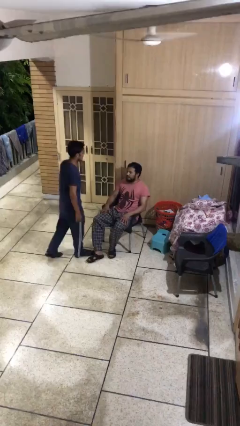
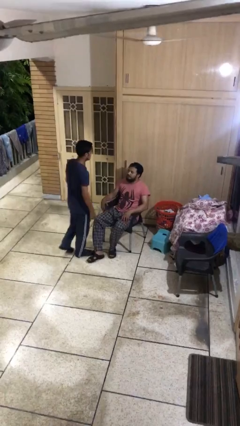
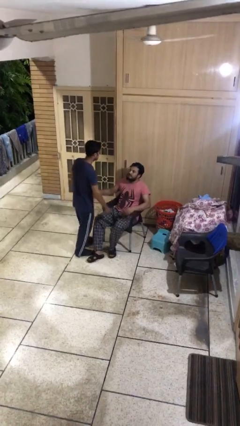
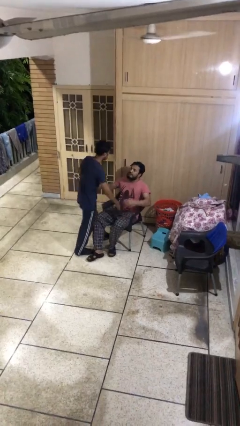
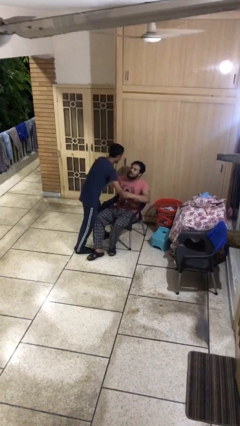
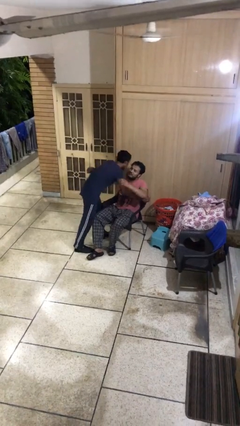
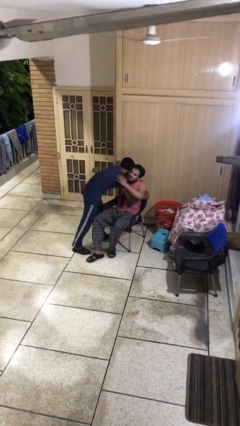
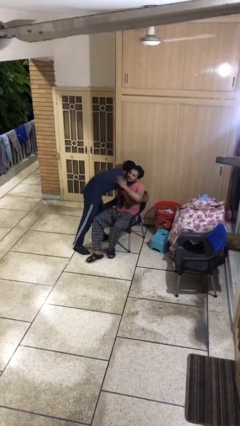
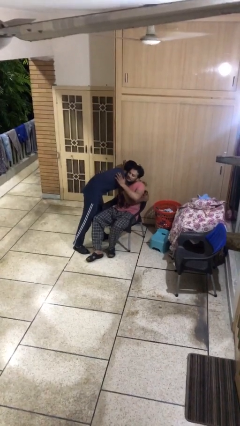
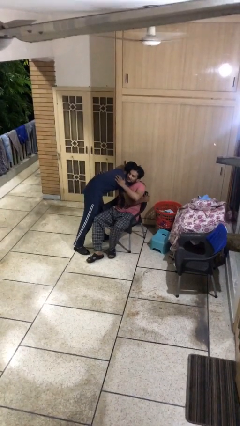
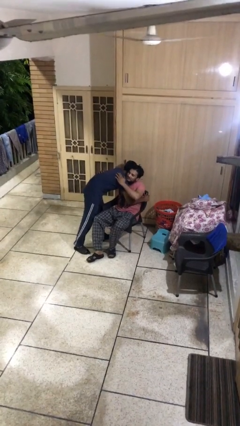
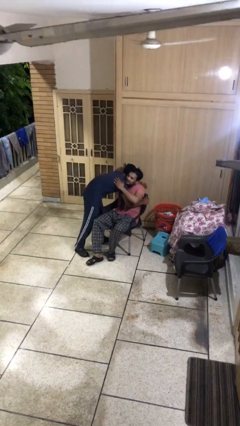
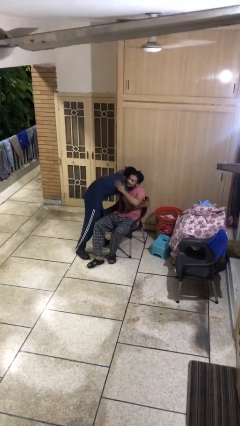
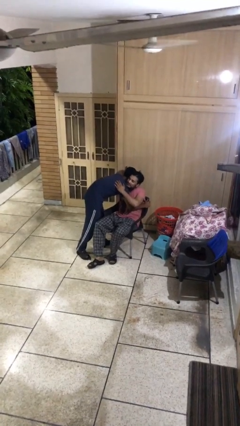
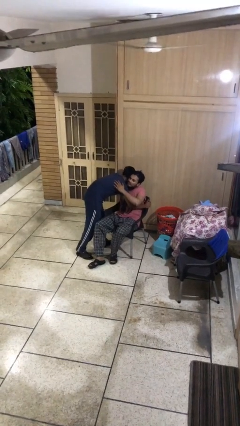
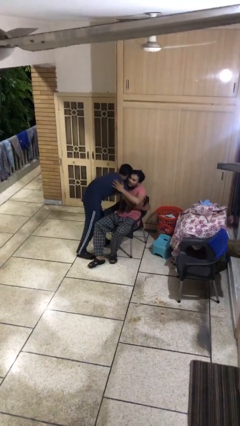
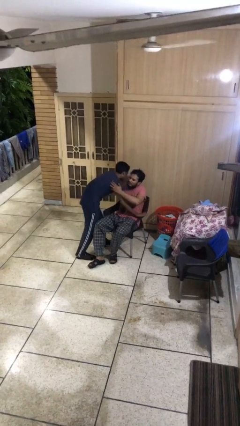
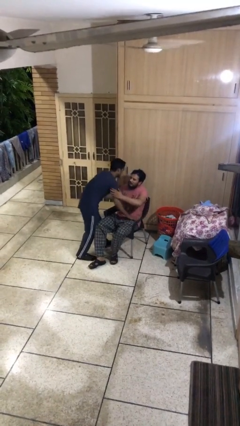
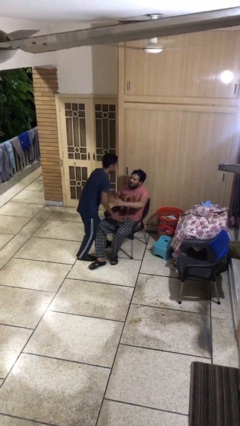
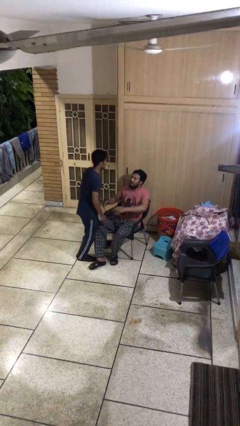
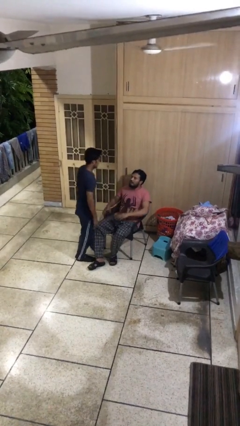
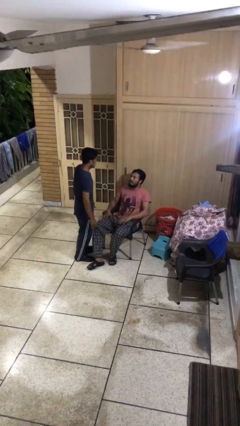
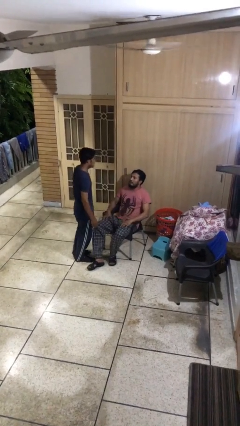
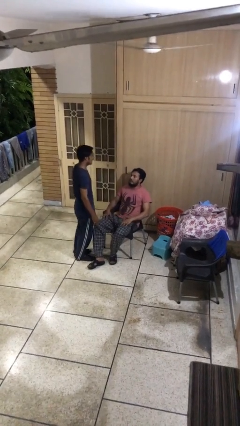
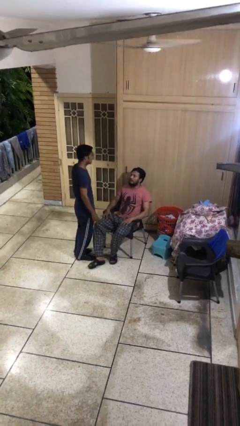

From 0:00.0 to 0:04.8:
person embraces person

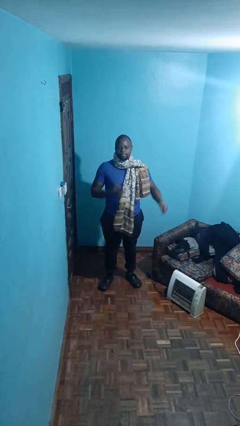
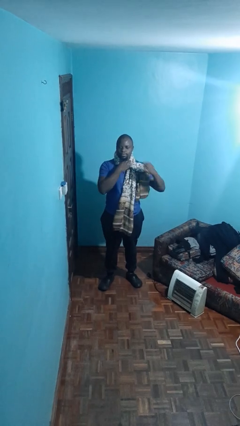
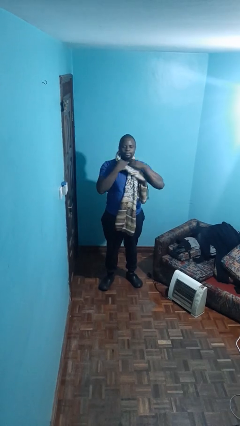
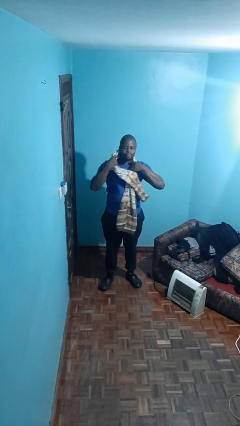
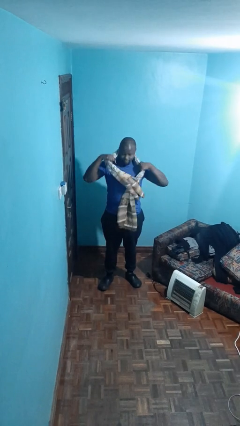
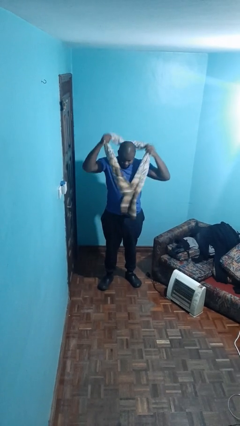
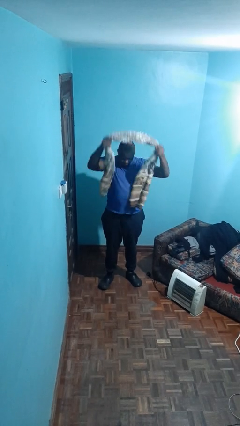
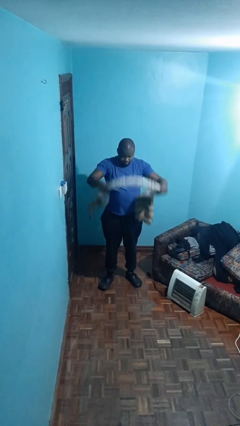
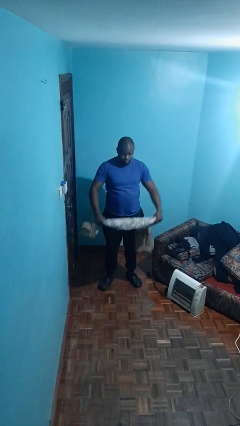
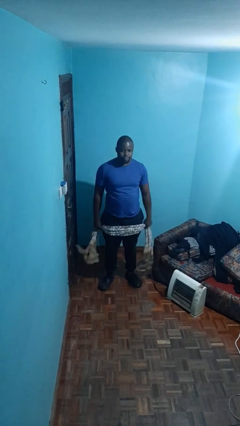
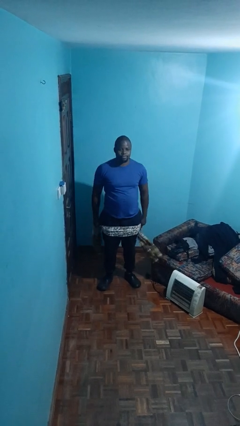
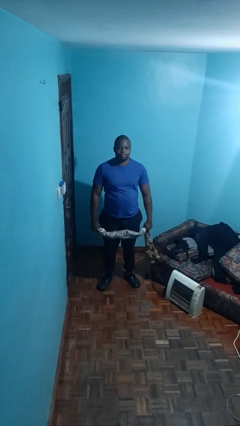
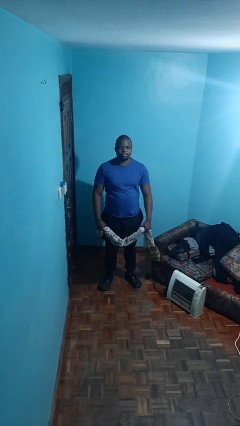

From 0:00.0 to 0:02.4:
person takes off scarf

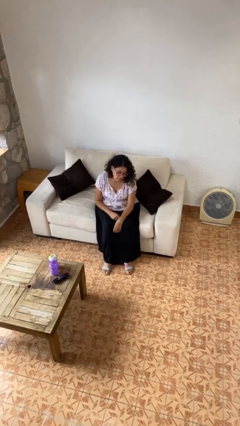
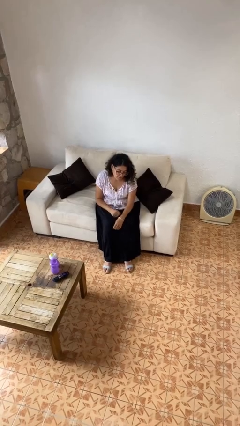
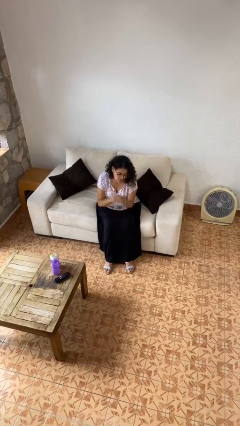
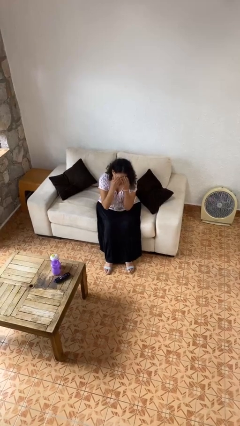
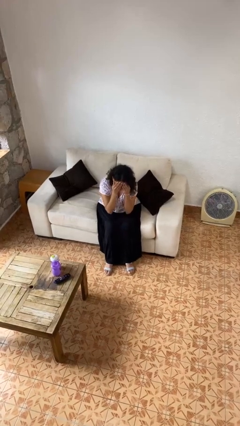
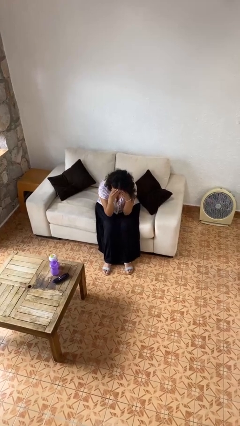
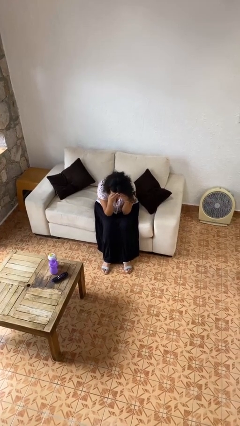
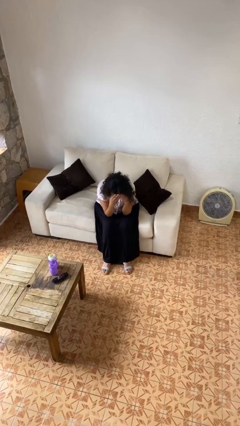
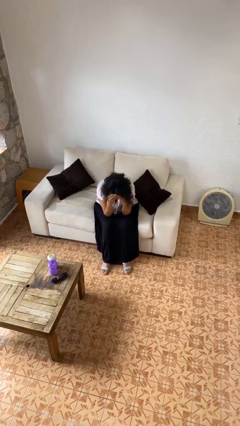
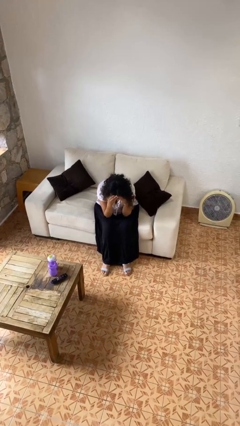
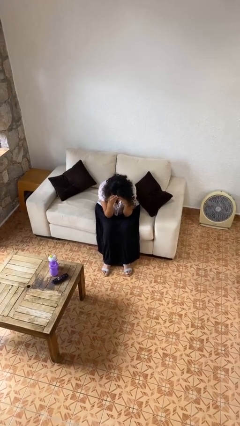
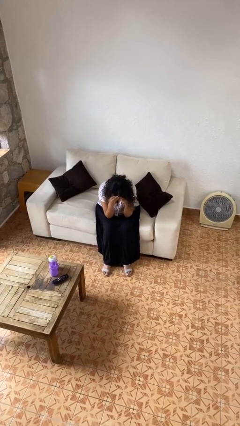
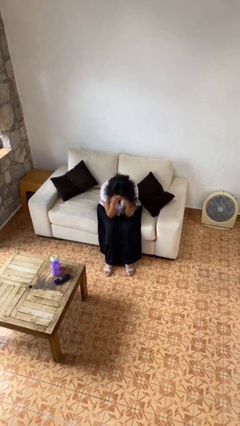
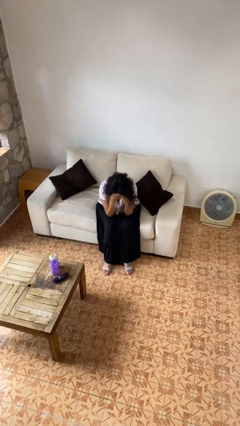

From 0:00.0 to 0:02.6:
person covers face with hands

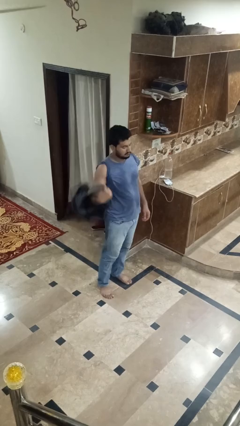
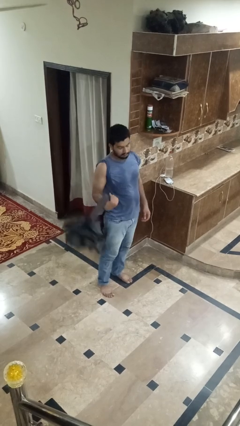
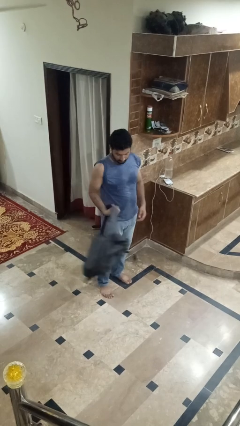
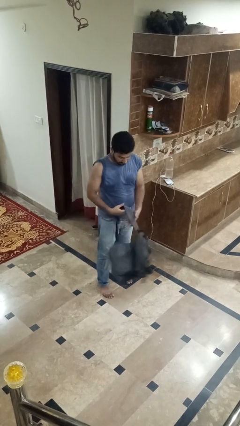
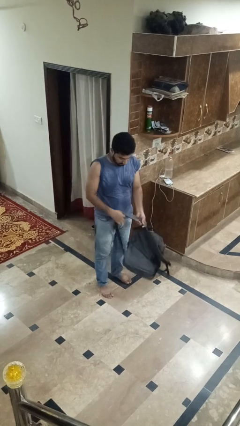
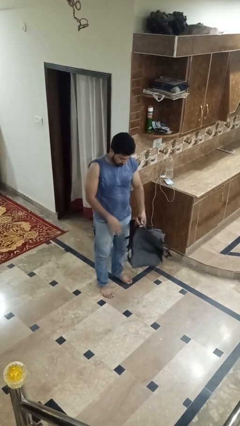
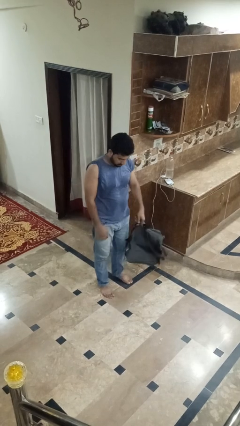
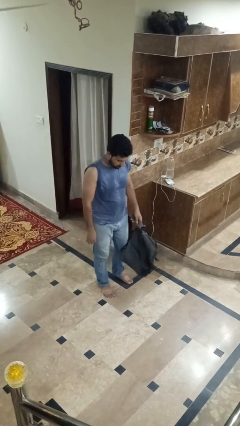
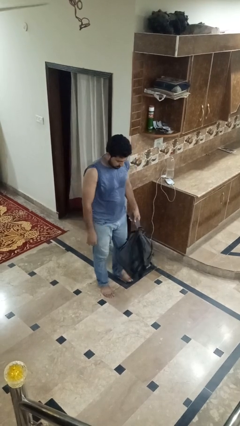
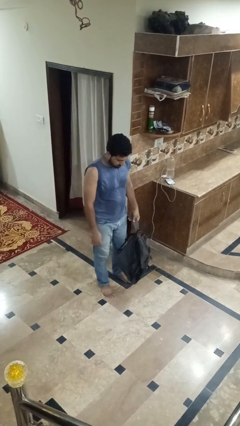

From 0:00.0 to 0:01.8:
person takes off backpack

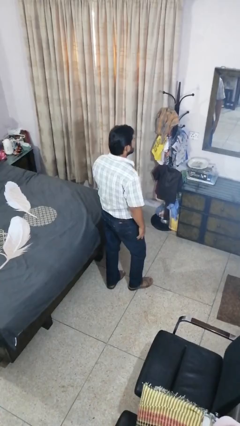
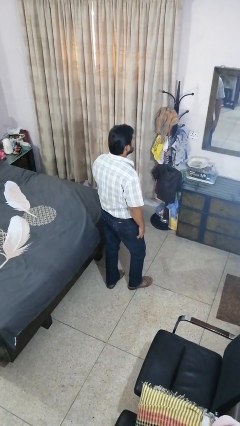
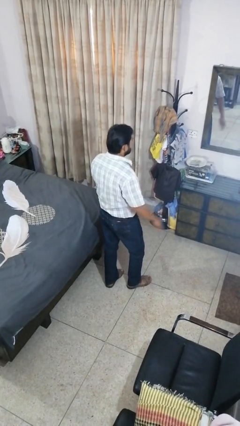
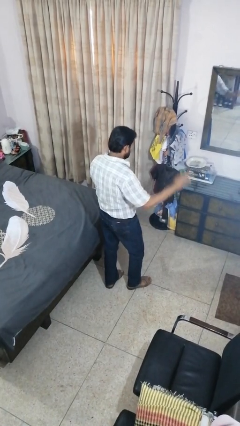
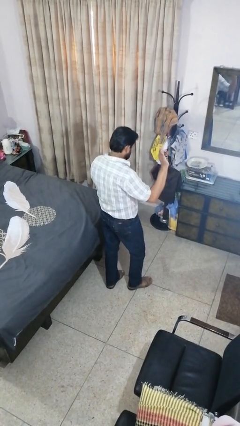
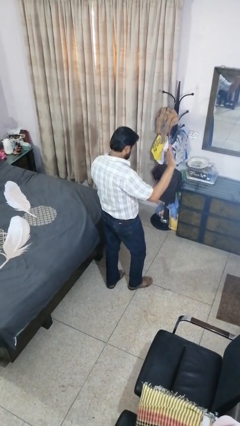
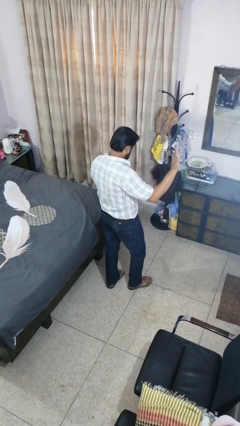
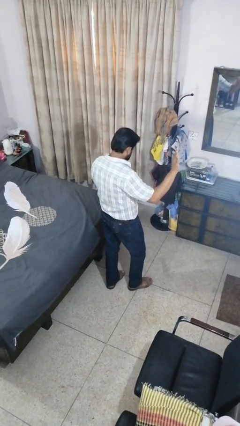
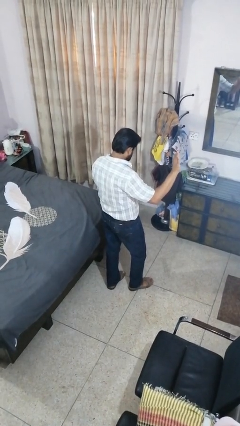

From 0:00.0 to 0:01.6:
person gestures stop

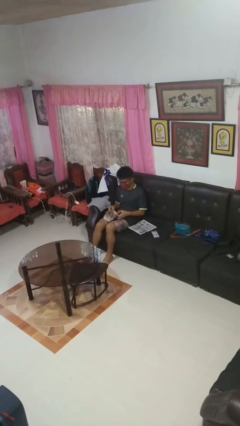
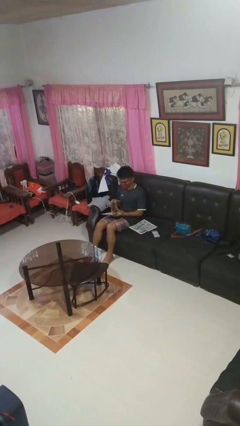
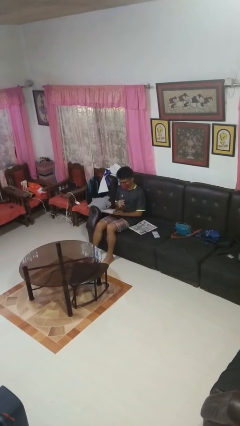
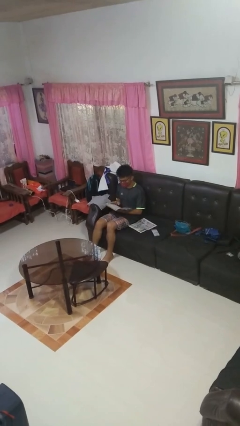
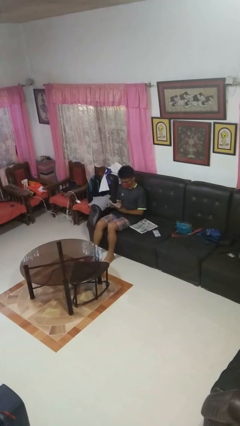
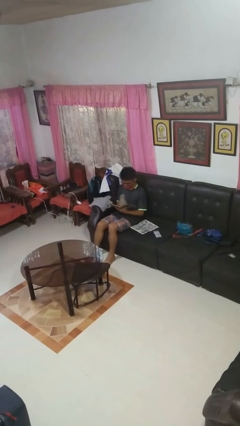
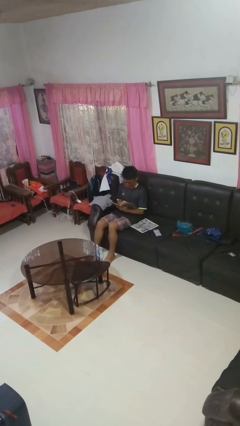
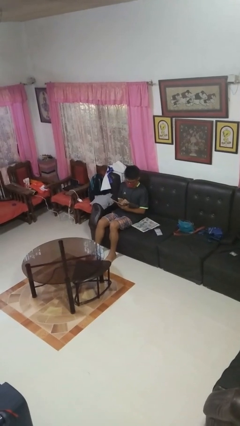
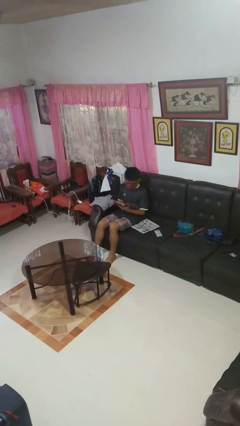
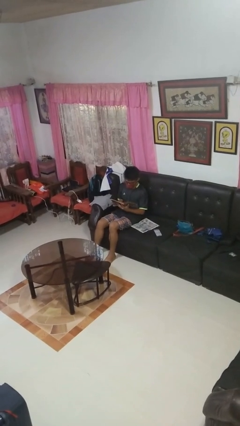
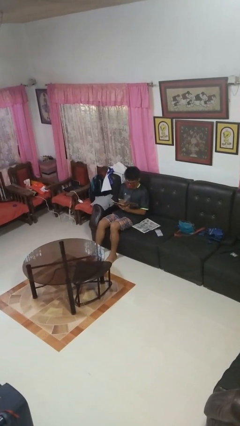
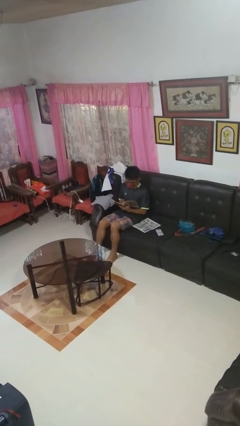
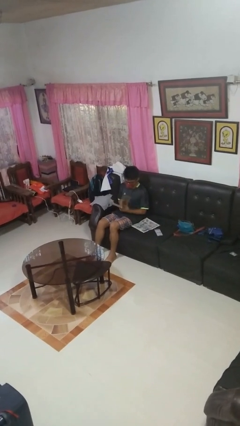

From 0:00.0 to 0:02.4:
person reads magazine

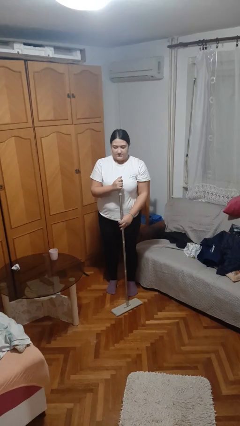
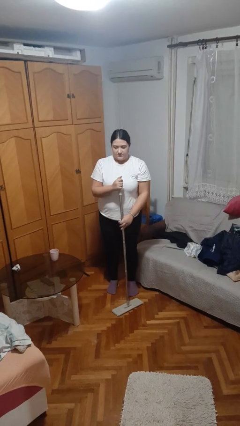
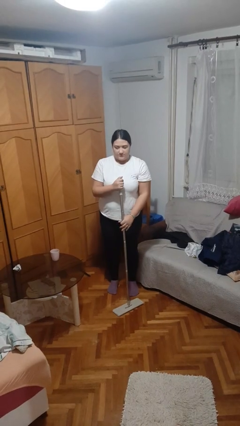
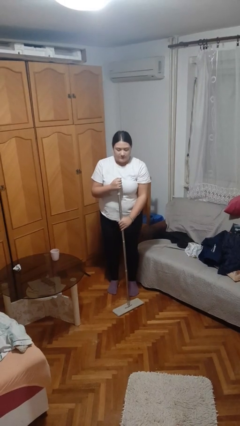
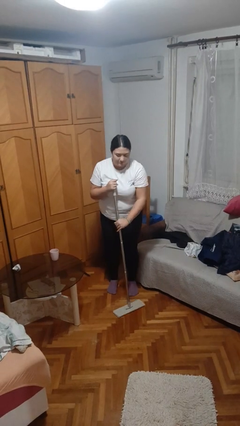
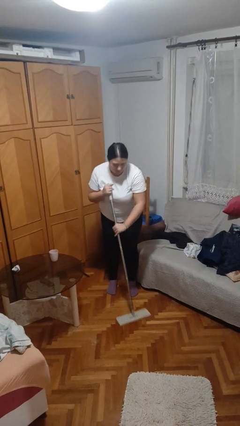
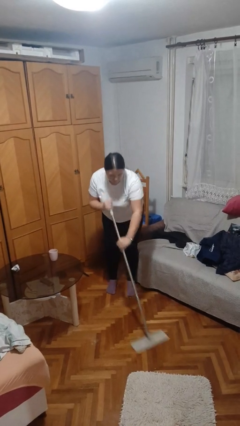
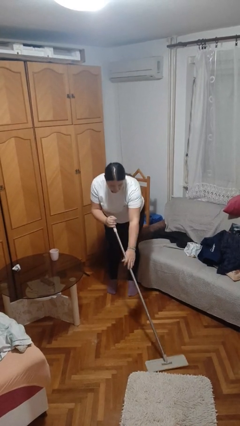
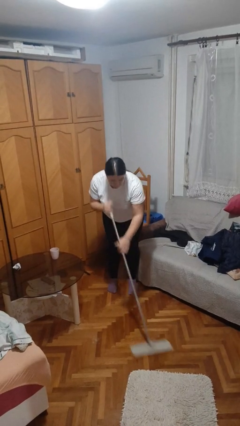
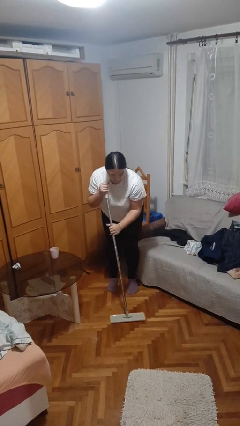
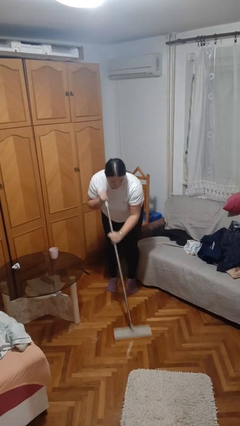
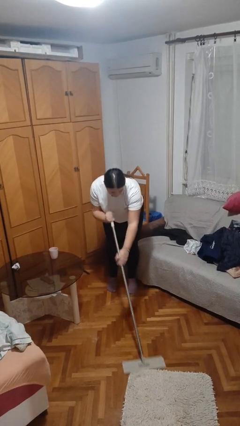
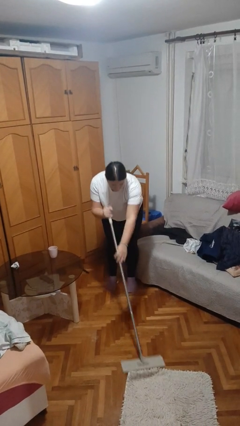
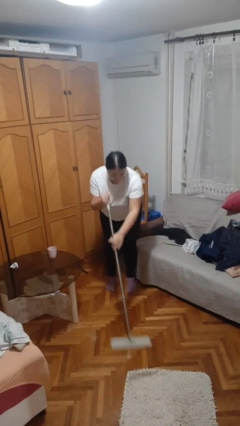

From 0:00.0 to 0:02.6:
person mops
